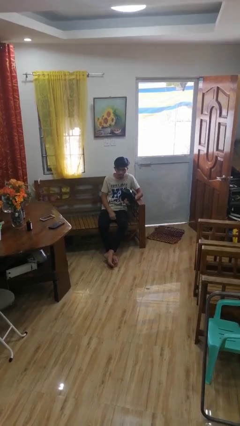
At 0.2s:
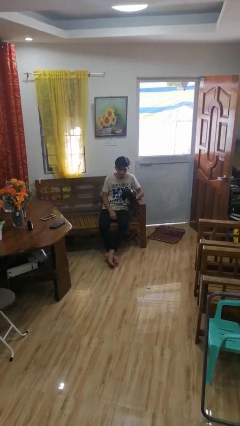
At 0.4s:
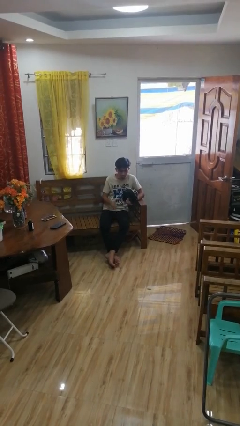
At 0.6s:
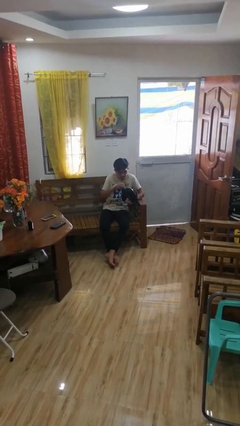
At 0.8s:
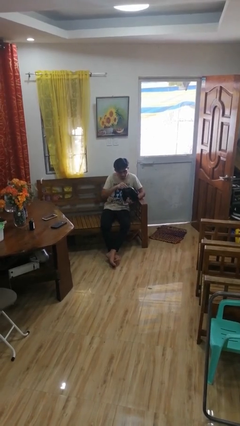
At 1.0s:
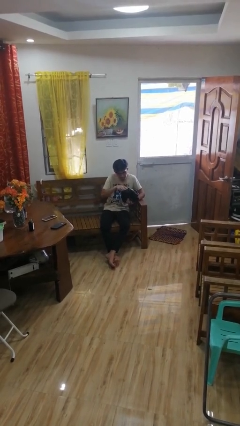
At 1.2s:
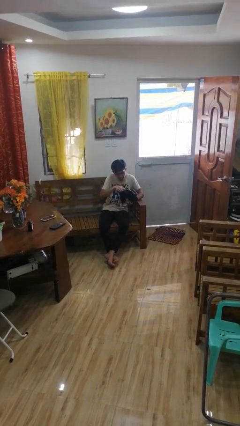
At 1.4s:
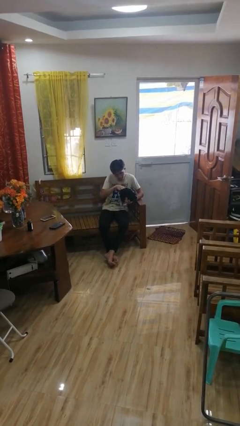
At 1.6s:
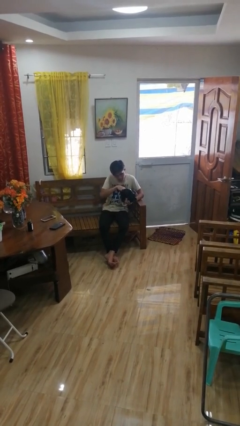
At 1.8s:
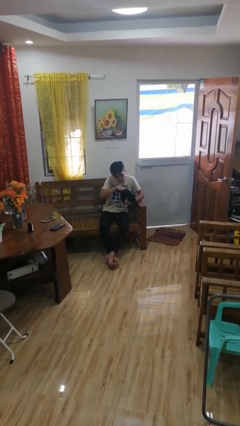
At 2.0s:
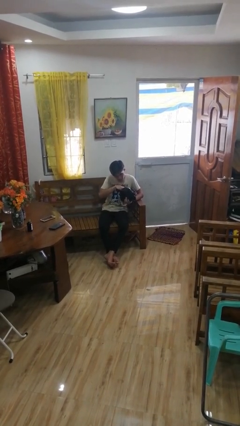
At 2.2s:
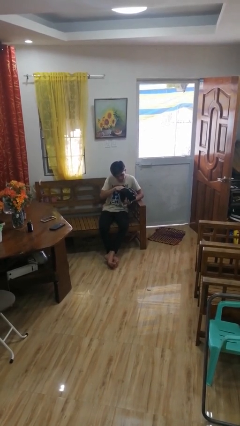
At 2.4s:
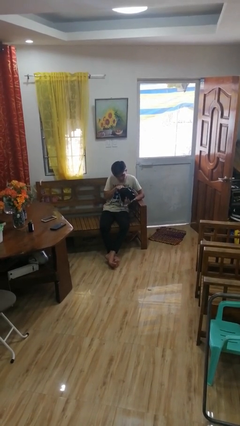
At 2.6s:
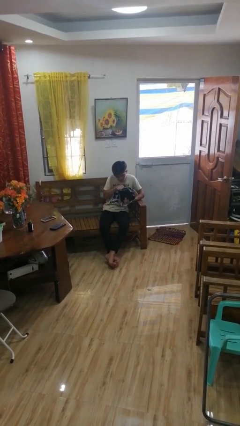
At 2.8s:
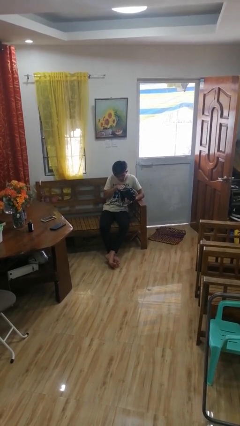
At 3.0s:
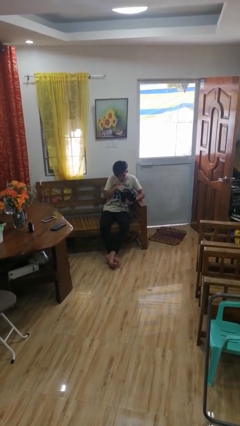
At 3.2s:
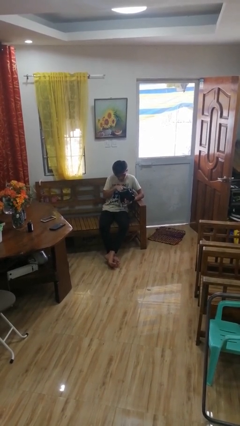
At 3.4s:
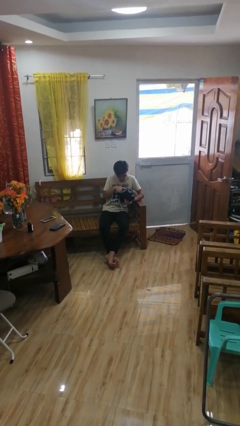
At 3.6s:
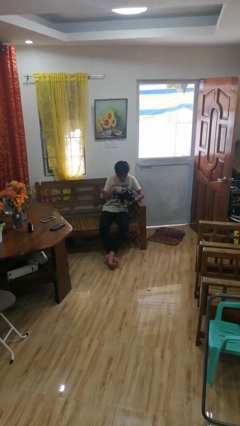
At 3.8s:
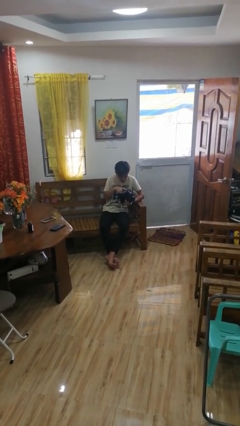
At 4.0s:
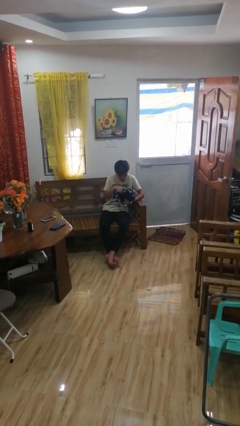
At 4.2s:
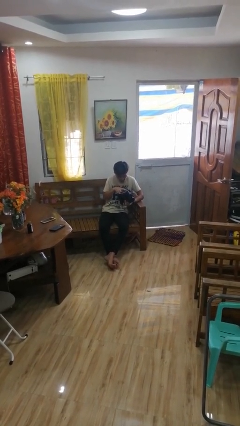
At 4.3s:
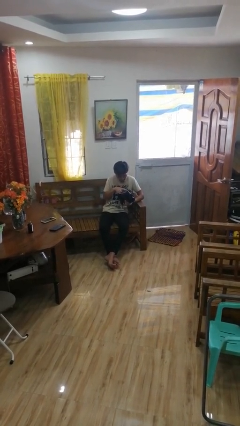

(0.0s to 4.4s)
person searches in purse

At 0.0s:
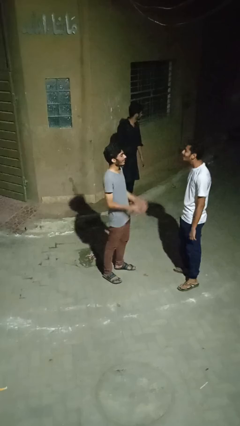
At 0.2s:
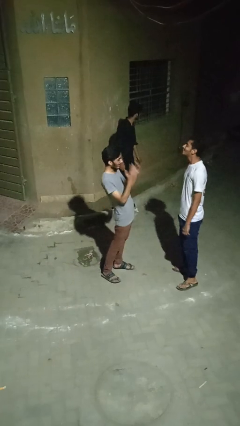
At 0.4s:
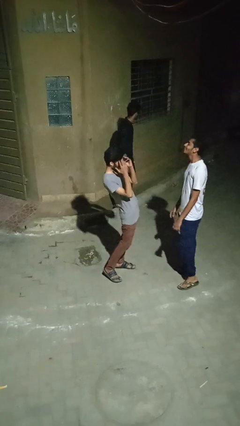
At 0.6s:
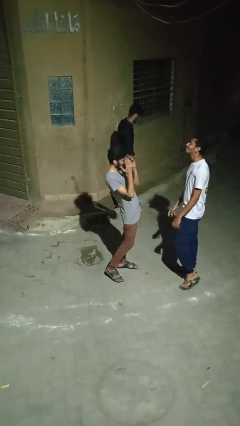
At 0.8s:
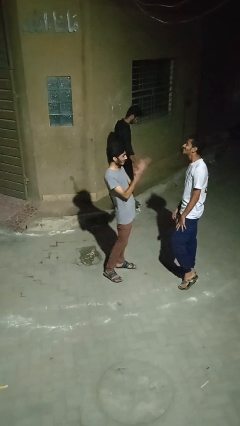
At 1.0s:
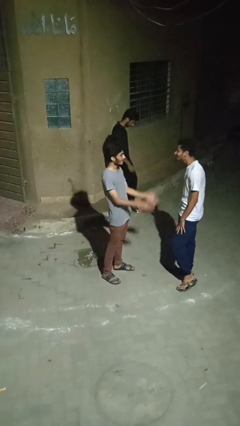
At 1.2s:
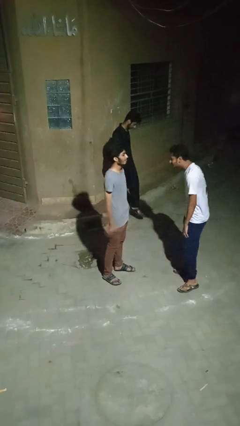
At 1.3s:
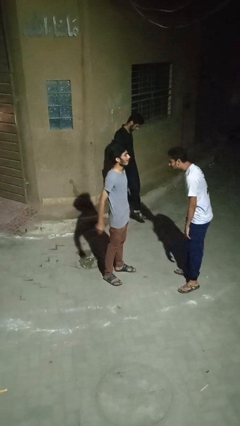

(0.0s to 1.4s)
person laughs with person

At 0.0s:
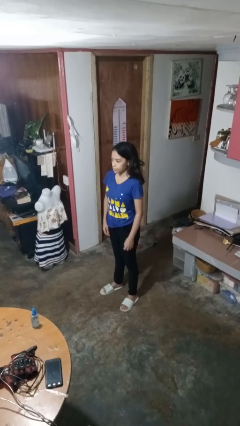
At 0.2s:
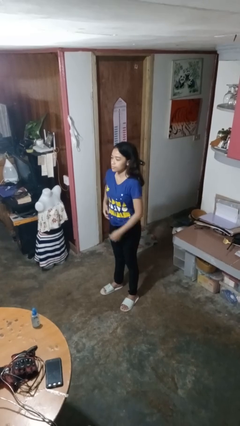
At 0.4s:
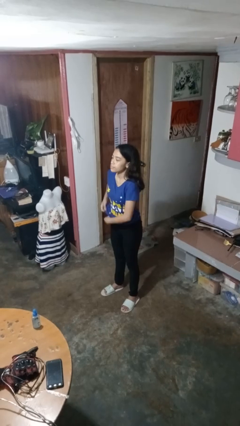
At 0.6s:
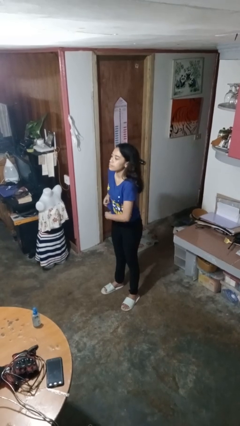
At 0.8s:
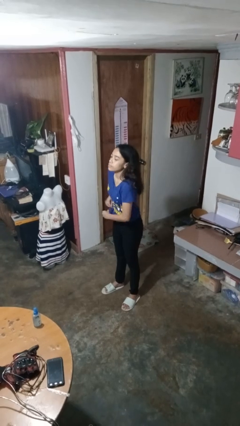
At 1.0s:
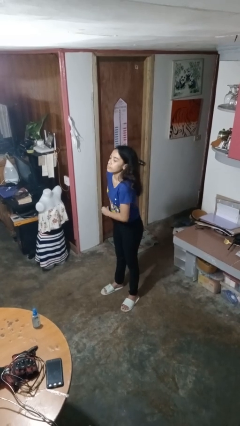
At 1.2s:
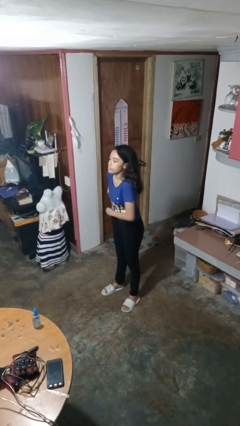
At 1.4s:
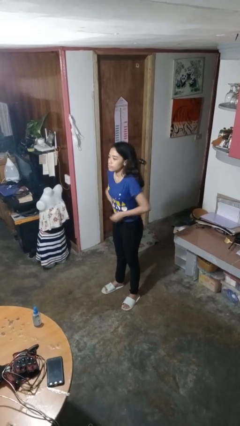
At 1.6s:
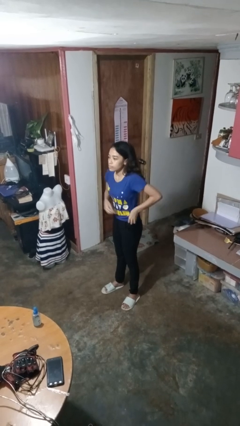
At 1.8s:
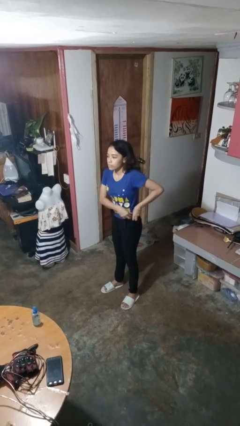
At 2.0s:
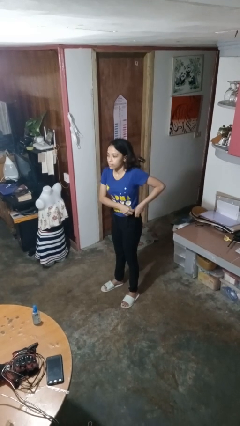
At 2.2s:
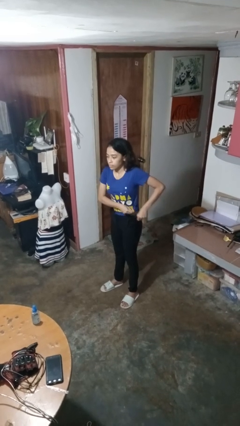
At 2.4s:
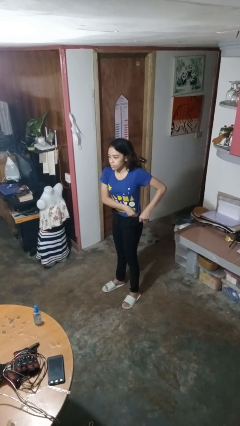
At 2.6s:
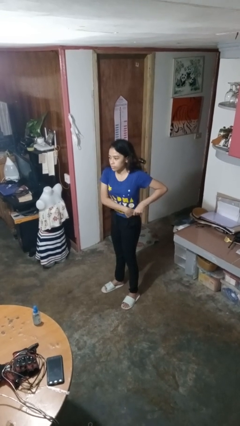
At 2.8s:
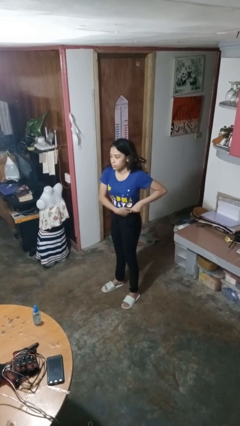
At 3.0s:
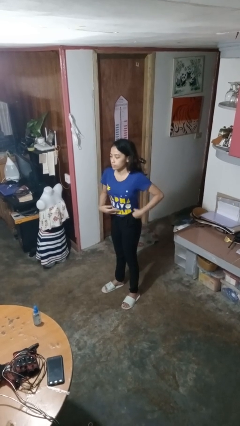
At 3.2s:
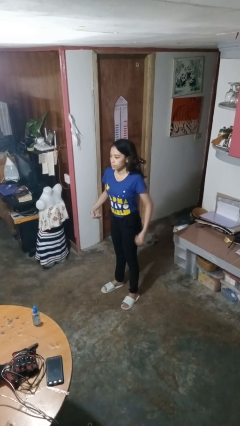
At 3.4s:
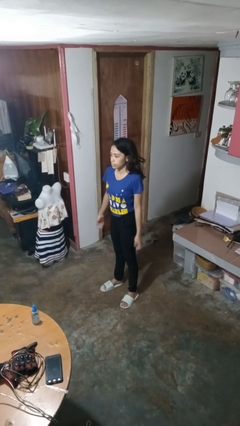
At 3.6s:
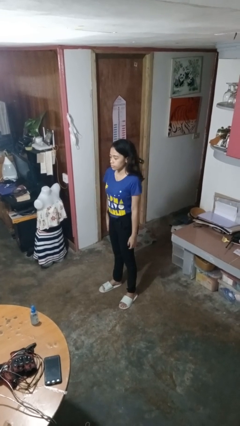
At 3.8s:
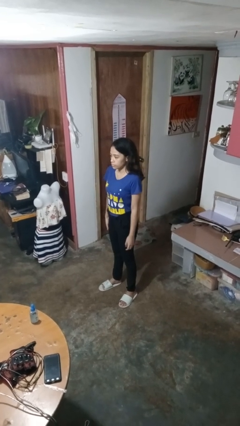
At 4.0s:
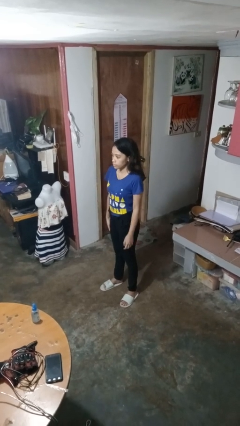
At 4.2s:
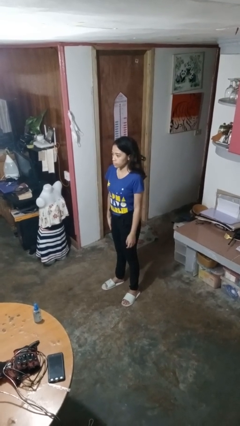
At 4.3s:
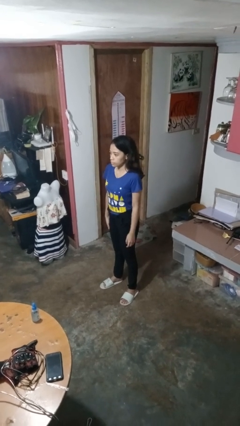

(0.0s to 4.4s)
person tucks in shirt

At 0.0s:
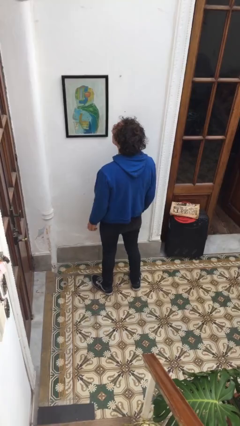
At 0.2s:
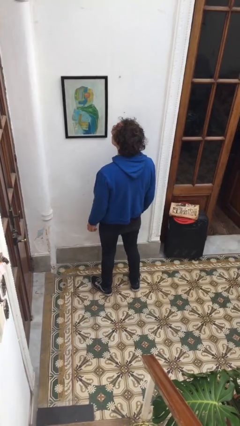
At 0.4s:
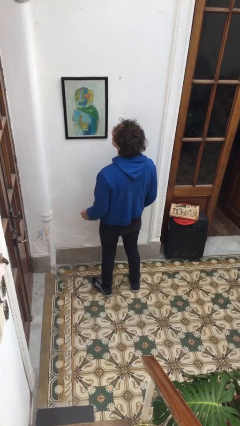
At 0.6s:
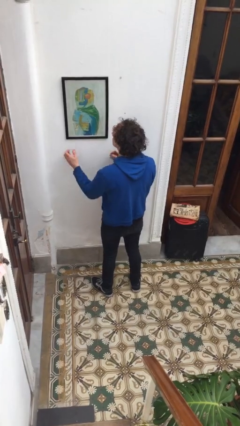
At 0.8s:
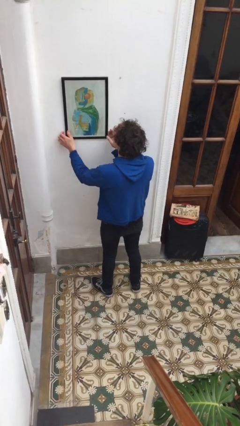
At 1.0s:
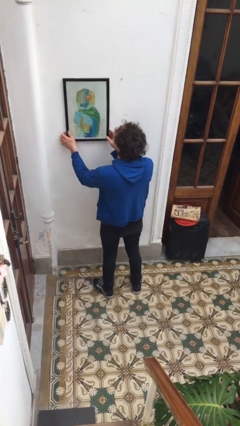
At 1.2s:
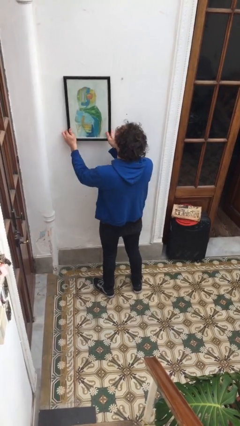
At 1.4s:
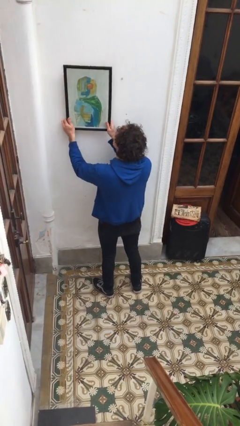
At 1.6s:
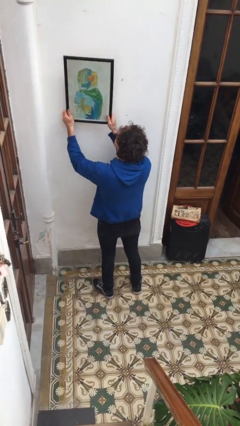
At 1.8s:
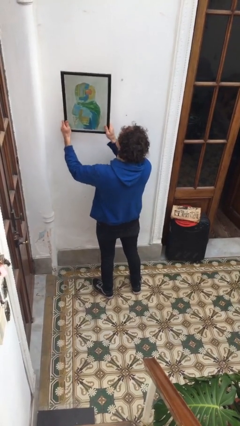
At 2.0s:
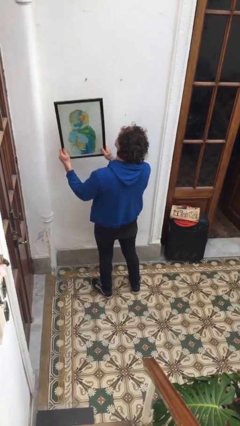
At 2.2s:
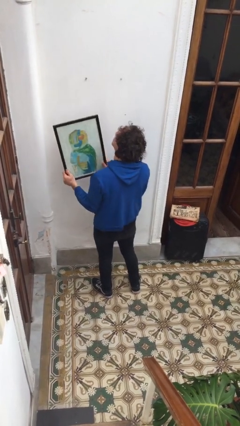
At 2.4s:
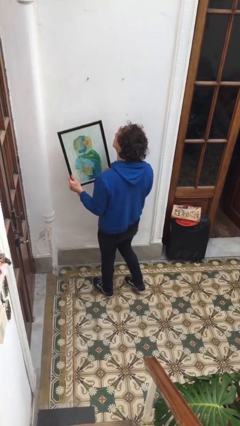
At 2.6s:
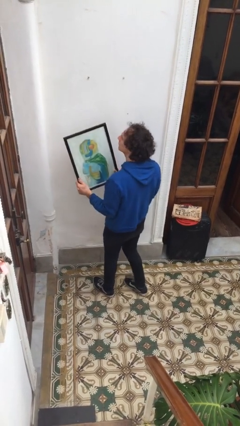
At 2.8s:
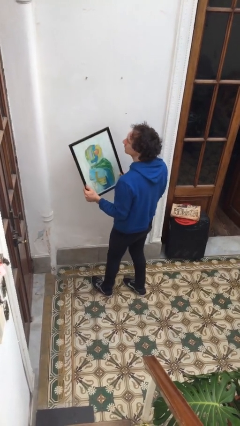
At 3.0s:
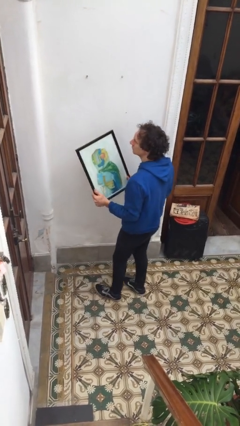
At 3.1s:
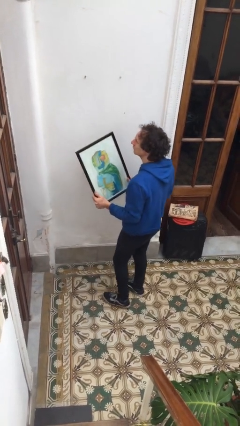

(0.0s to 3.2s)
person takes down picture frame

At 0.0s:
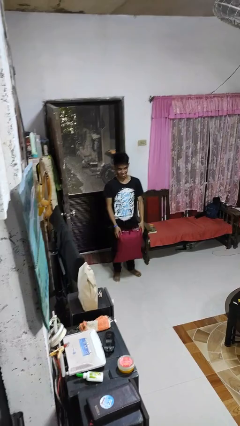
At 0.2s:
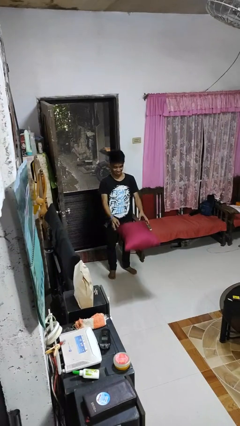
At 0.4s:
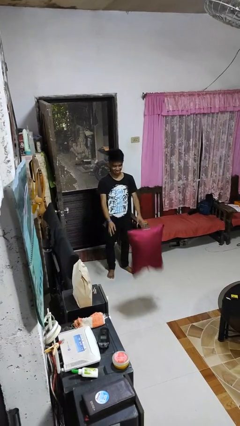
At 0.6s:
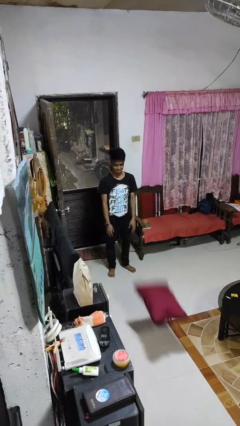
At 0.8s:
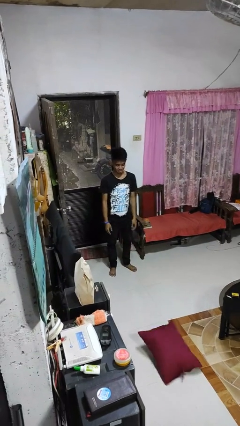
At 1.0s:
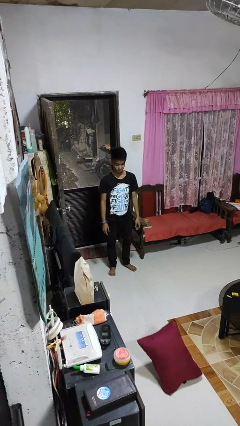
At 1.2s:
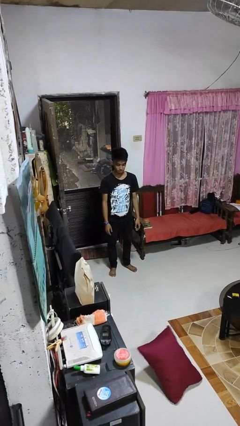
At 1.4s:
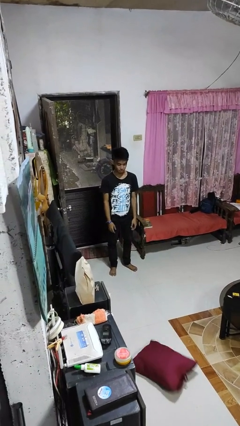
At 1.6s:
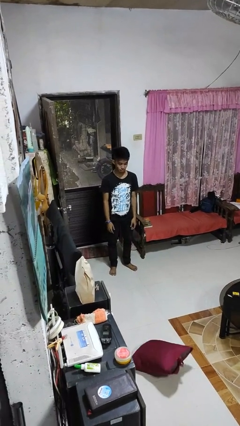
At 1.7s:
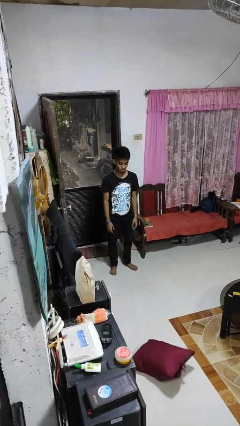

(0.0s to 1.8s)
person throws object to ground

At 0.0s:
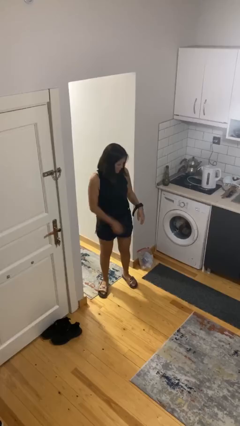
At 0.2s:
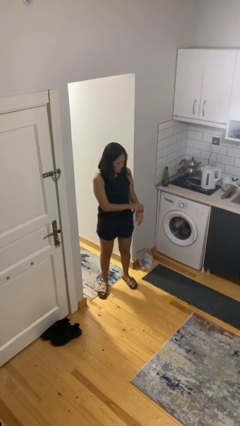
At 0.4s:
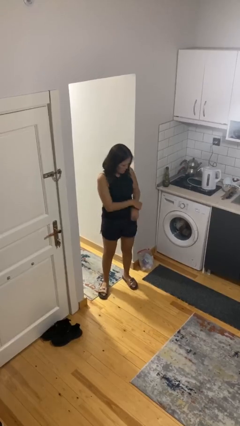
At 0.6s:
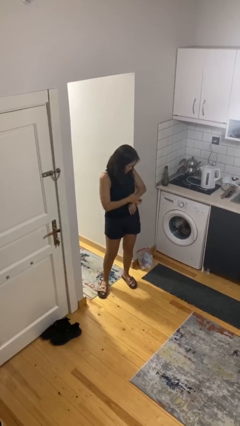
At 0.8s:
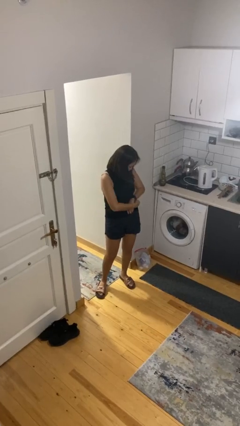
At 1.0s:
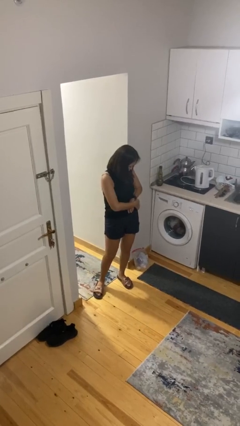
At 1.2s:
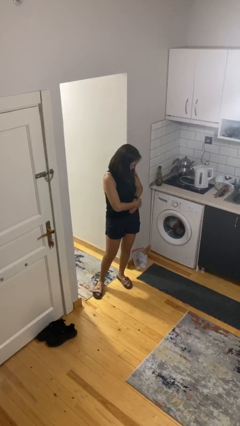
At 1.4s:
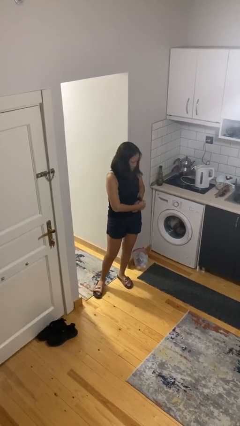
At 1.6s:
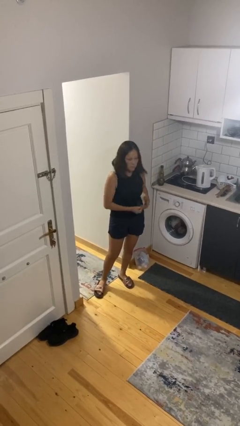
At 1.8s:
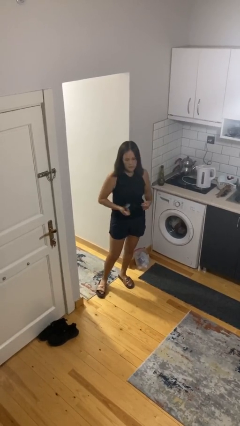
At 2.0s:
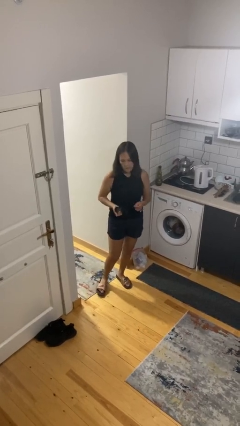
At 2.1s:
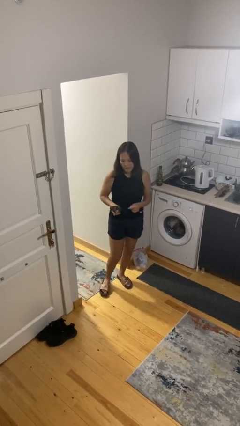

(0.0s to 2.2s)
person takes off wristwatch
